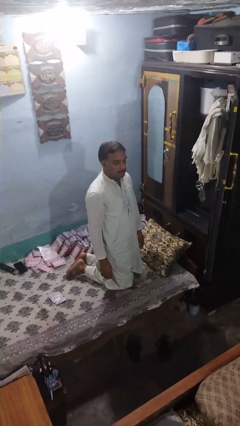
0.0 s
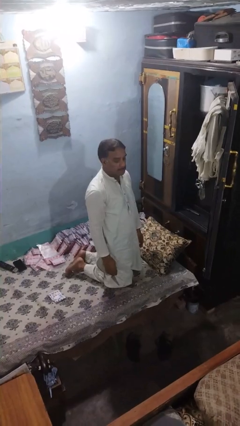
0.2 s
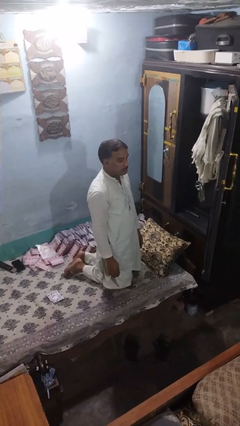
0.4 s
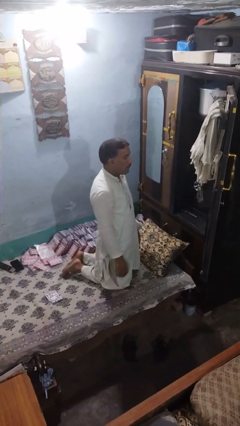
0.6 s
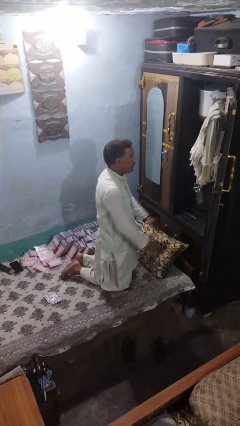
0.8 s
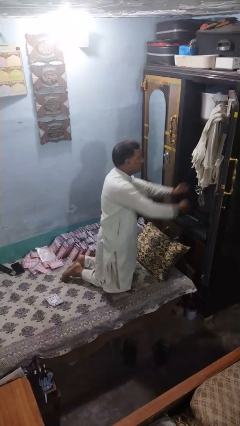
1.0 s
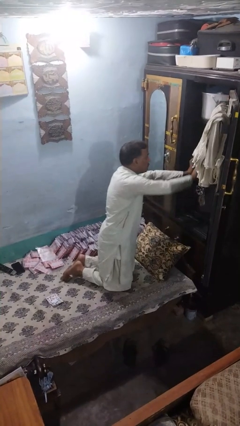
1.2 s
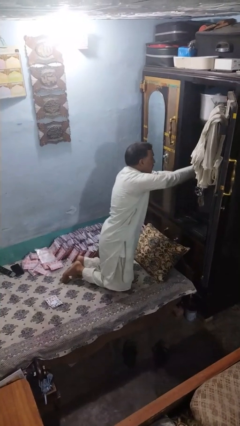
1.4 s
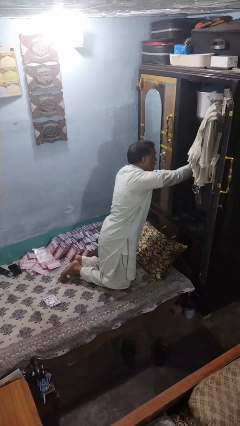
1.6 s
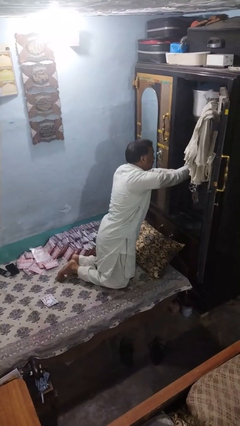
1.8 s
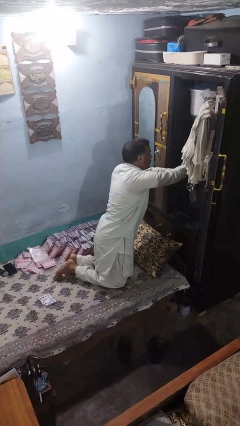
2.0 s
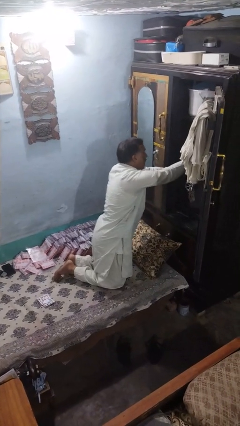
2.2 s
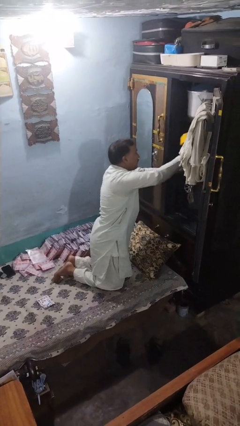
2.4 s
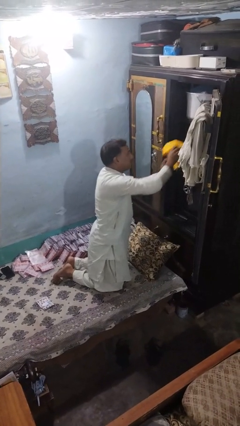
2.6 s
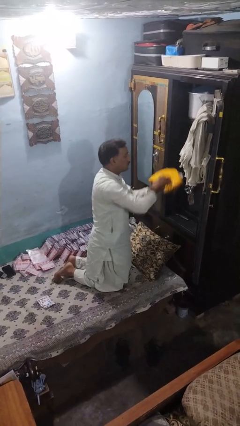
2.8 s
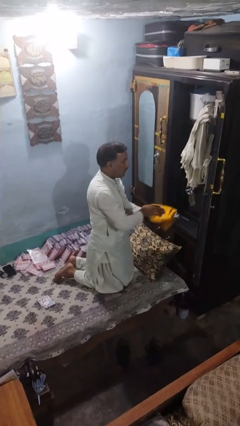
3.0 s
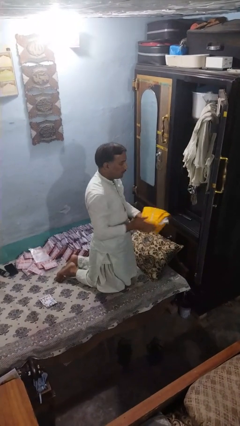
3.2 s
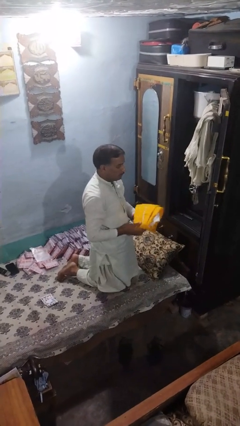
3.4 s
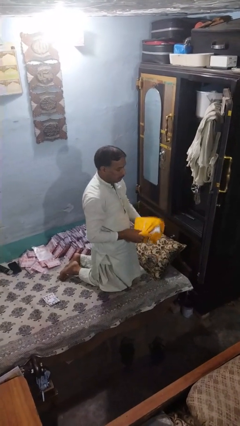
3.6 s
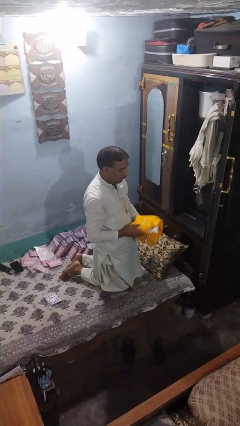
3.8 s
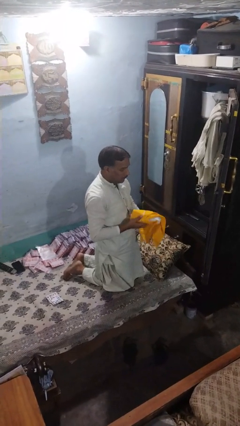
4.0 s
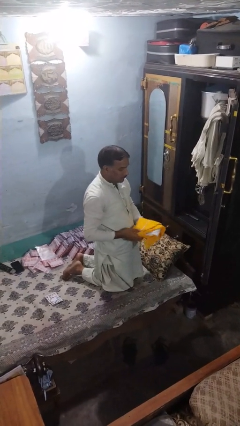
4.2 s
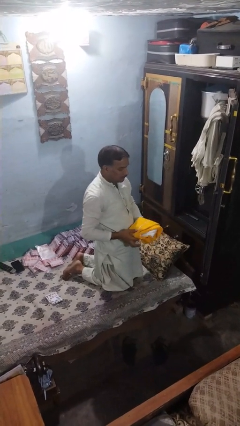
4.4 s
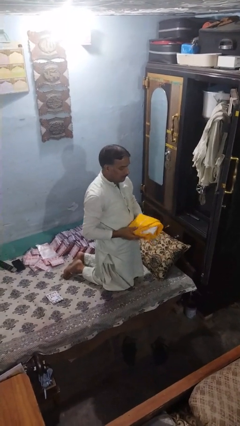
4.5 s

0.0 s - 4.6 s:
person takes clothes from dresser

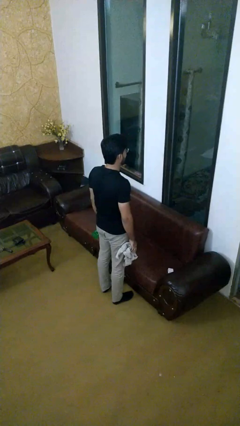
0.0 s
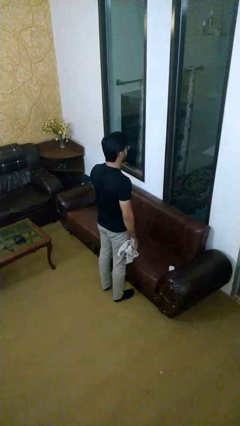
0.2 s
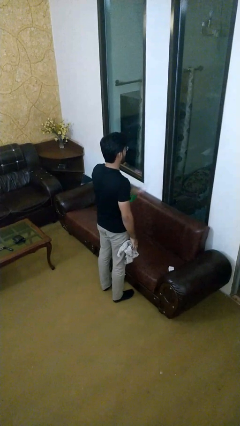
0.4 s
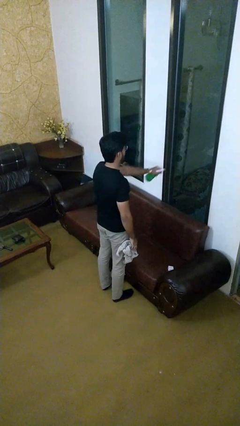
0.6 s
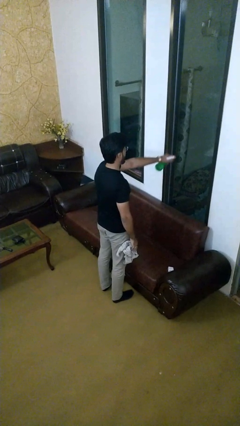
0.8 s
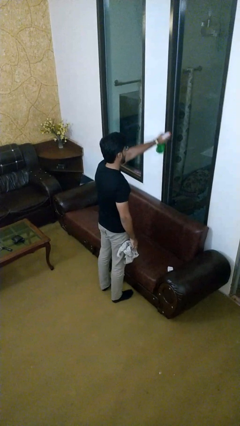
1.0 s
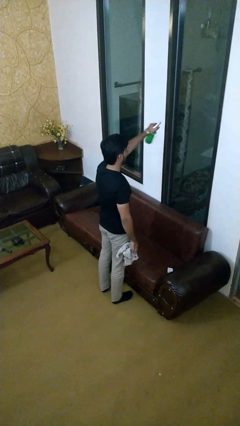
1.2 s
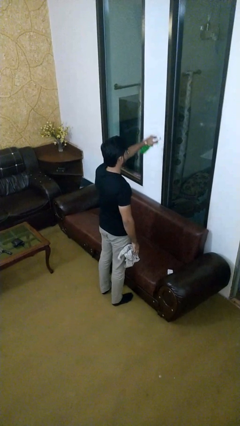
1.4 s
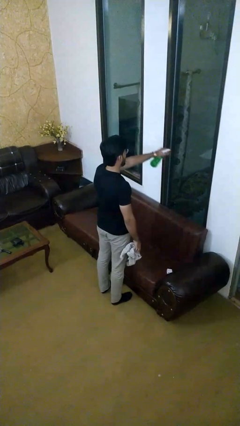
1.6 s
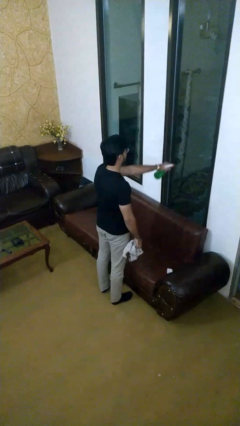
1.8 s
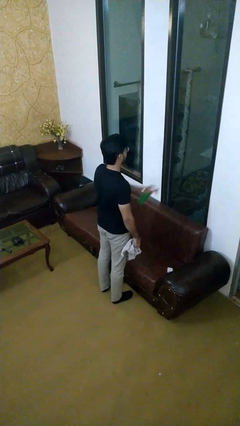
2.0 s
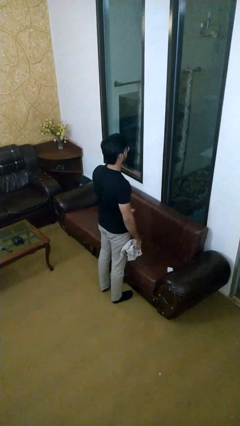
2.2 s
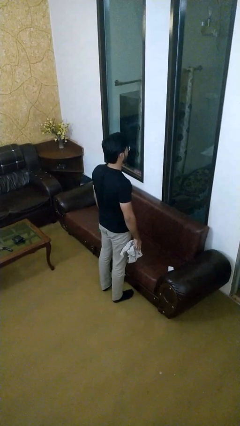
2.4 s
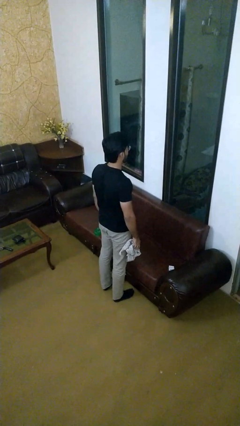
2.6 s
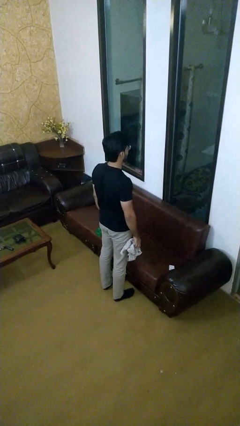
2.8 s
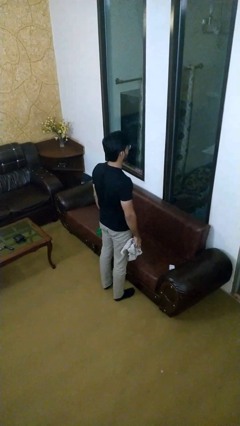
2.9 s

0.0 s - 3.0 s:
person sprays from bottle

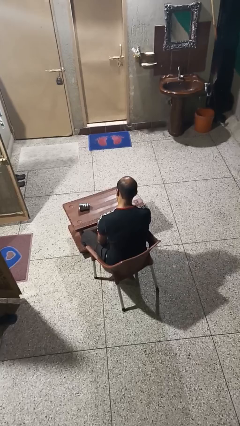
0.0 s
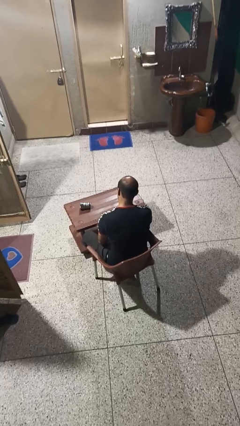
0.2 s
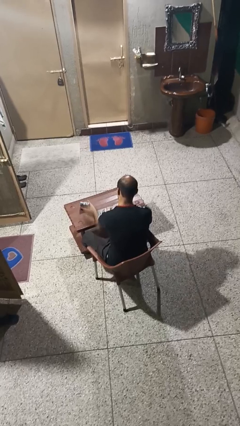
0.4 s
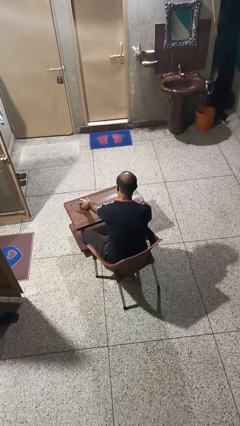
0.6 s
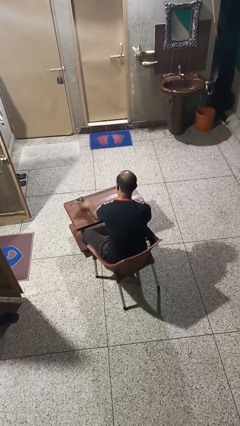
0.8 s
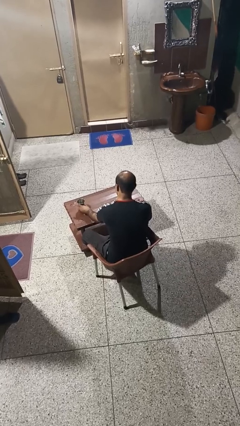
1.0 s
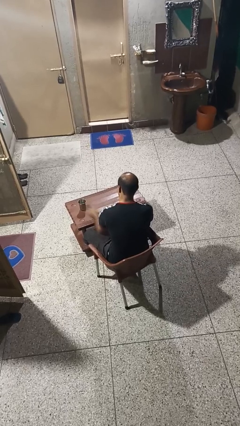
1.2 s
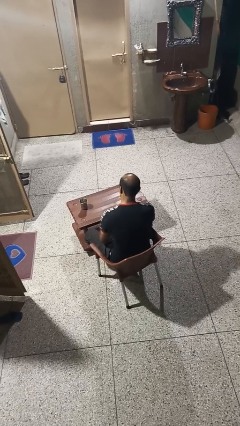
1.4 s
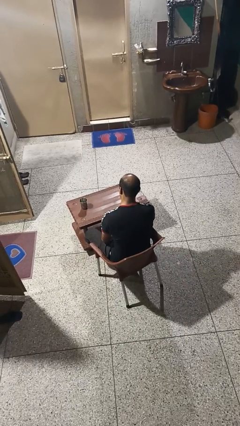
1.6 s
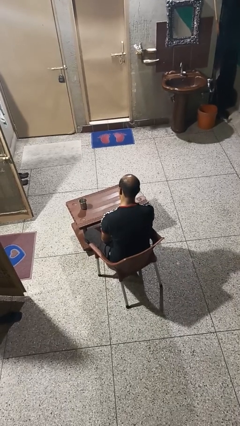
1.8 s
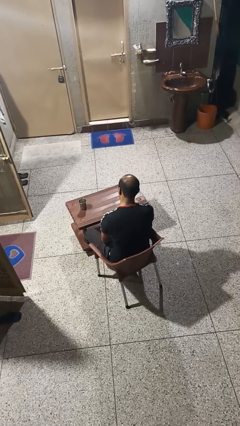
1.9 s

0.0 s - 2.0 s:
person sets upright glass

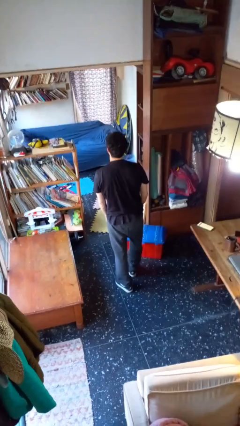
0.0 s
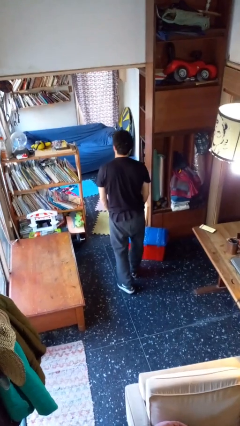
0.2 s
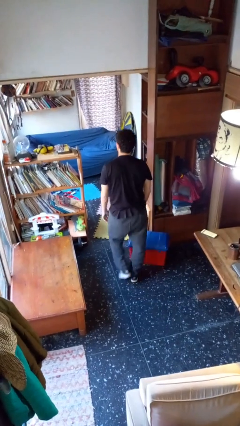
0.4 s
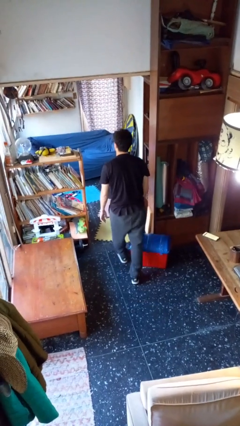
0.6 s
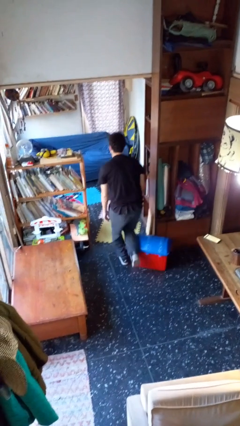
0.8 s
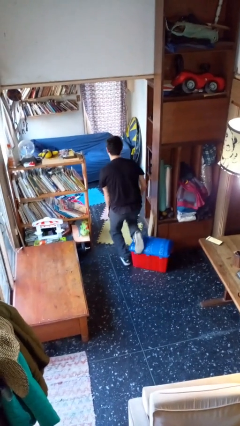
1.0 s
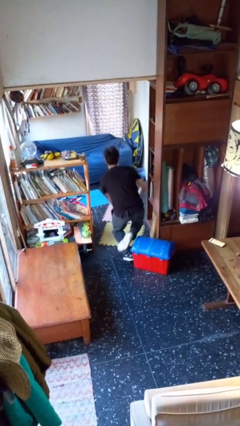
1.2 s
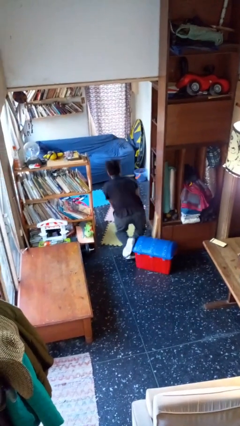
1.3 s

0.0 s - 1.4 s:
person trips on object on floor

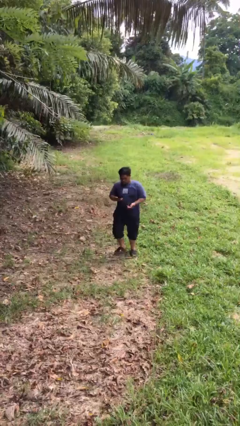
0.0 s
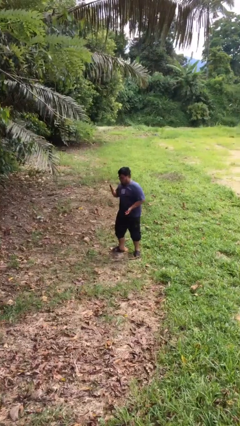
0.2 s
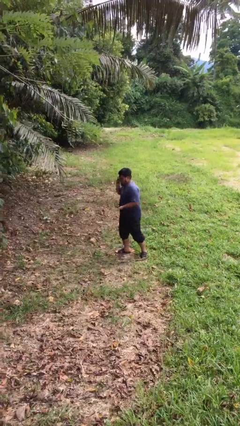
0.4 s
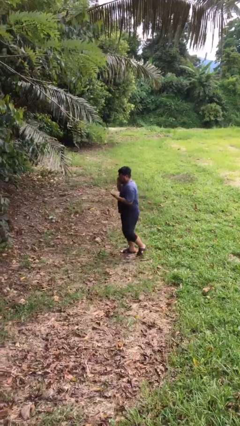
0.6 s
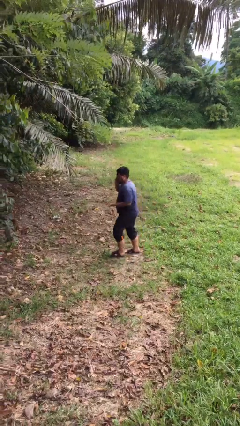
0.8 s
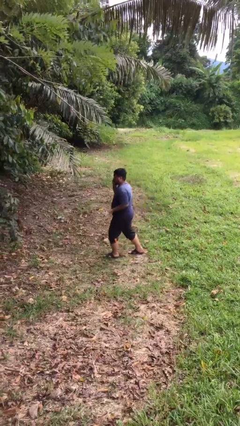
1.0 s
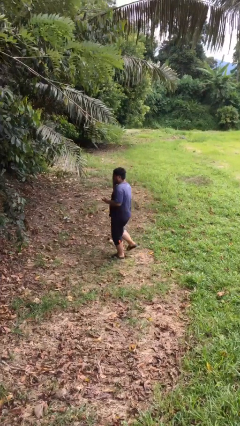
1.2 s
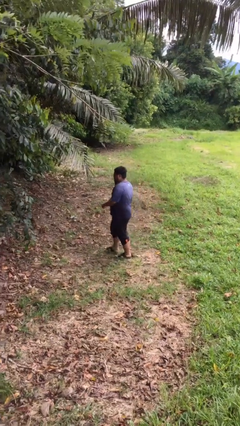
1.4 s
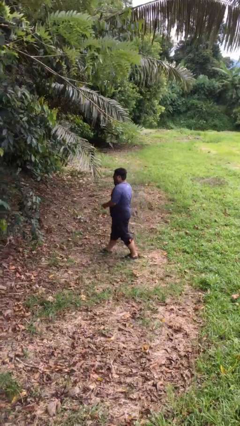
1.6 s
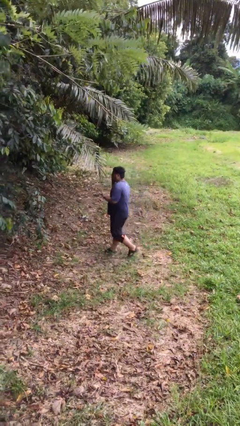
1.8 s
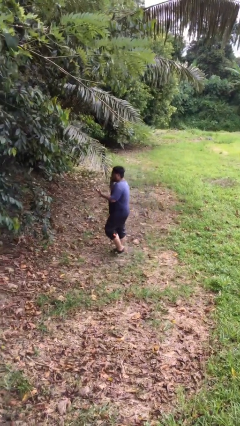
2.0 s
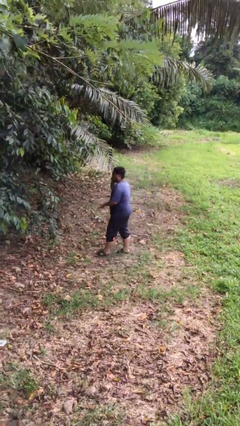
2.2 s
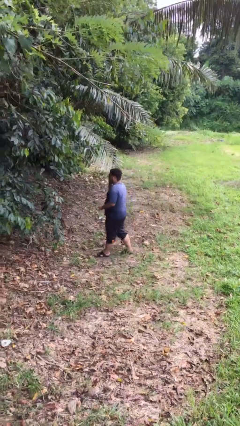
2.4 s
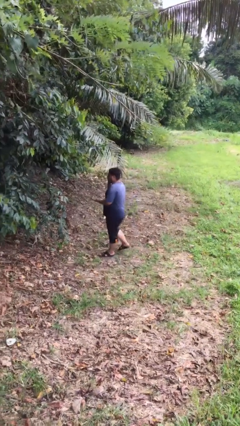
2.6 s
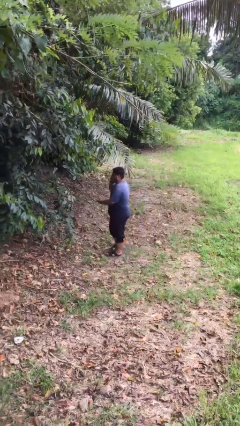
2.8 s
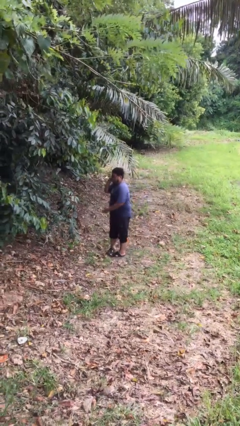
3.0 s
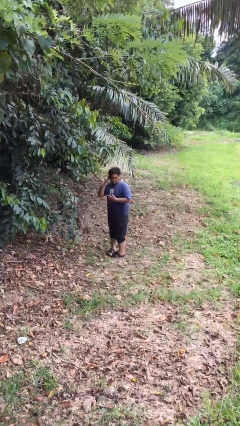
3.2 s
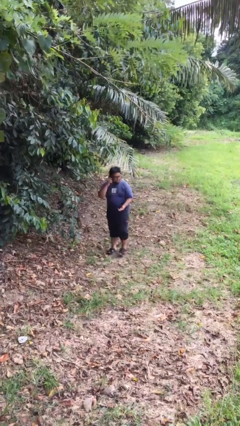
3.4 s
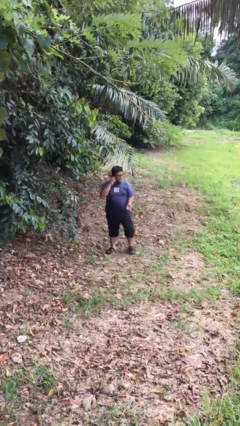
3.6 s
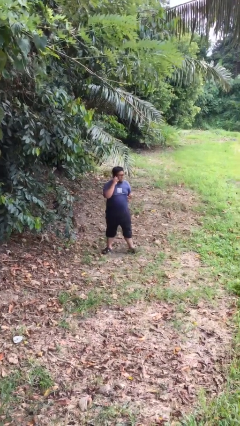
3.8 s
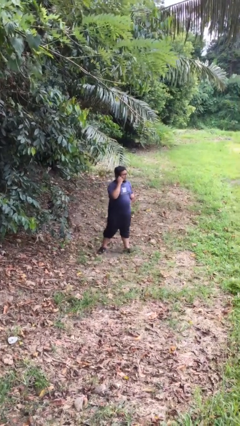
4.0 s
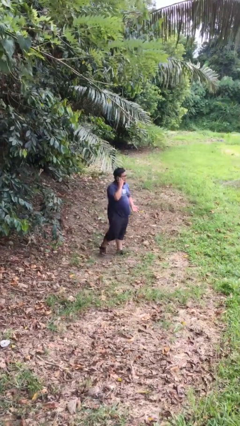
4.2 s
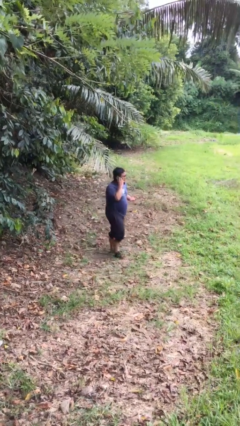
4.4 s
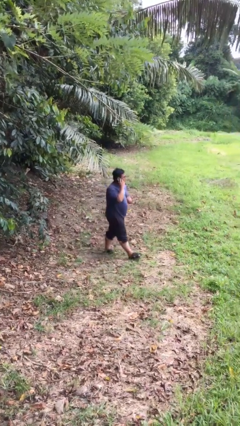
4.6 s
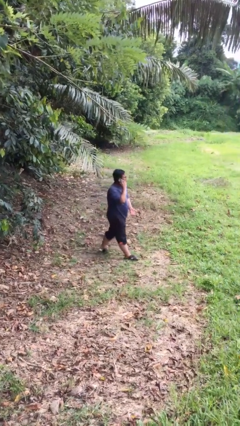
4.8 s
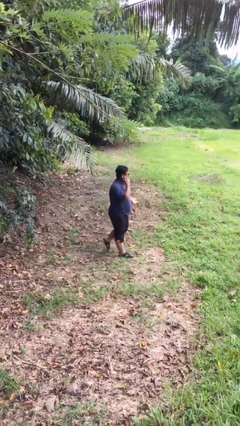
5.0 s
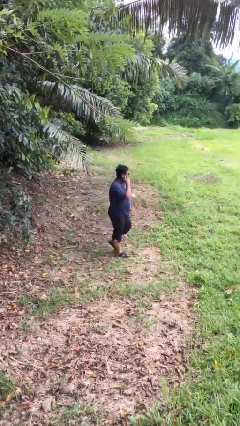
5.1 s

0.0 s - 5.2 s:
person talks on phone

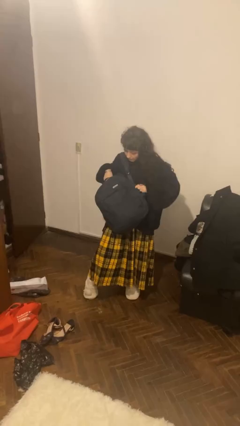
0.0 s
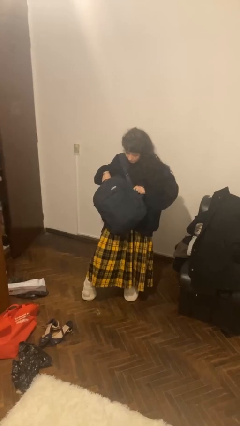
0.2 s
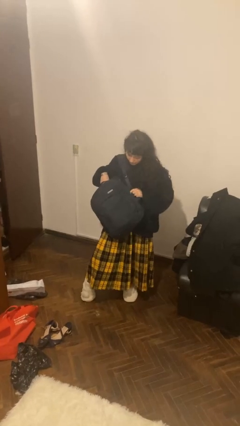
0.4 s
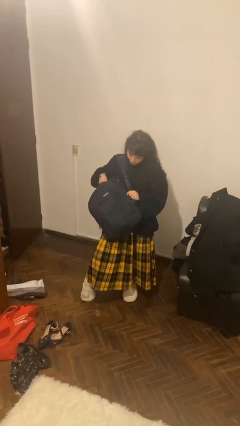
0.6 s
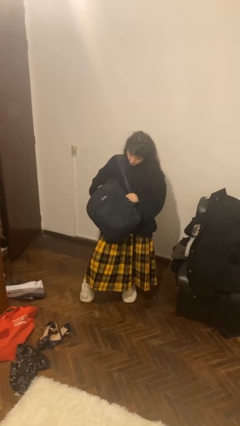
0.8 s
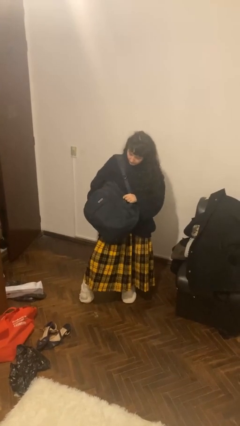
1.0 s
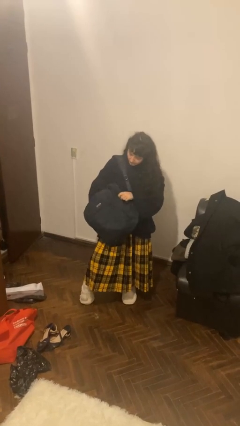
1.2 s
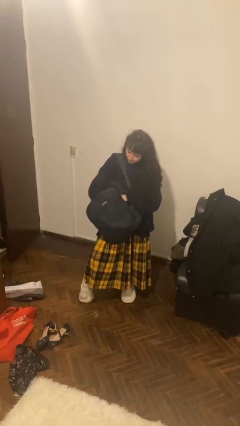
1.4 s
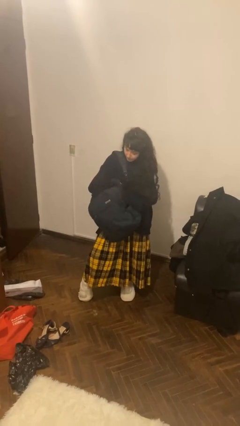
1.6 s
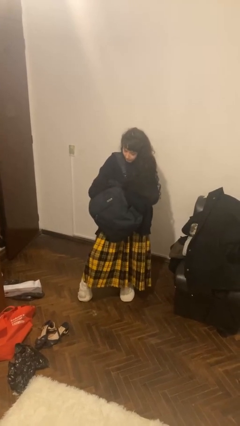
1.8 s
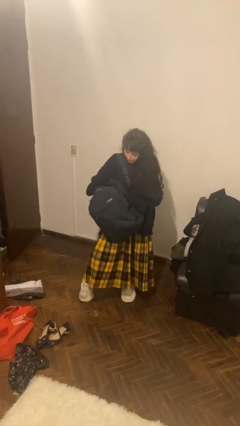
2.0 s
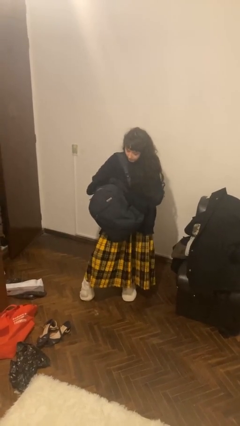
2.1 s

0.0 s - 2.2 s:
person searches in backpack
